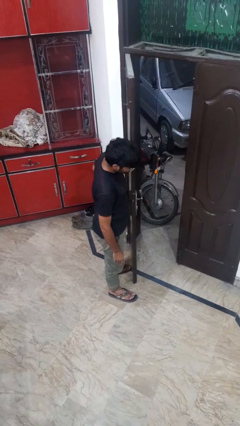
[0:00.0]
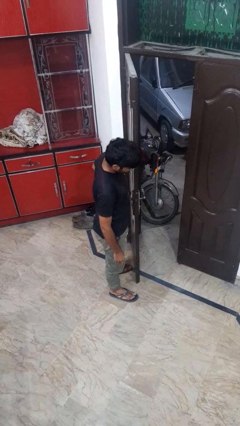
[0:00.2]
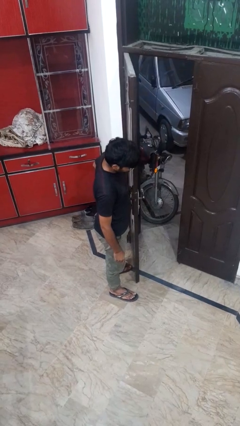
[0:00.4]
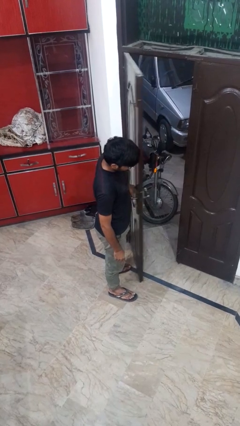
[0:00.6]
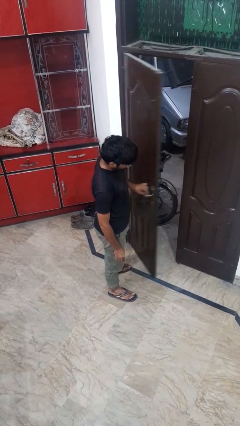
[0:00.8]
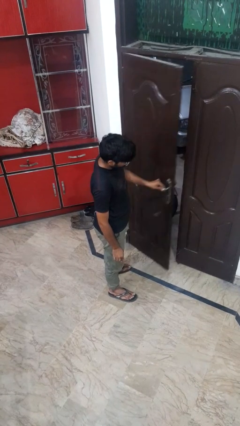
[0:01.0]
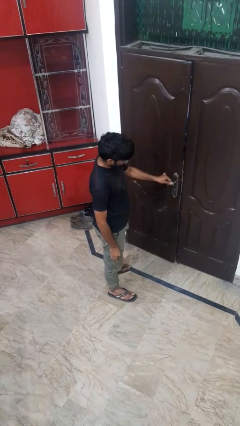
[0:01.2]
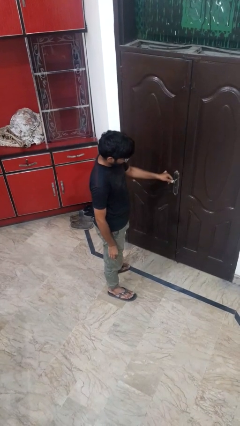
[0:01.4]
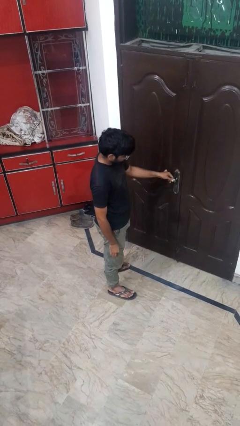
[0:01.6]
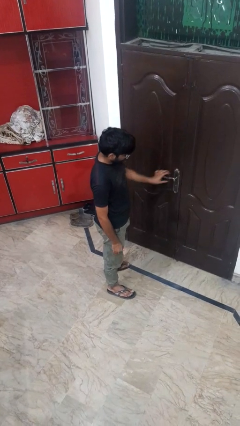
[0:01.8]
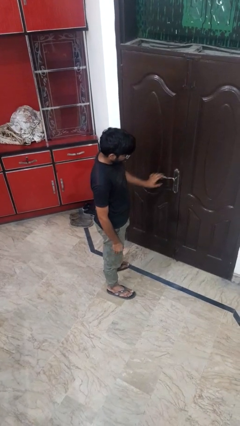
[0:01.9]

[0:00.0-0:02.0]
person closes facility door

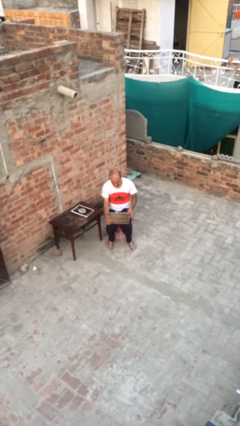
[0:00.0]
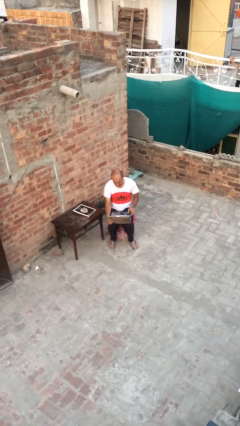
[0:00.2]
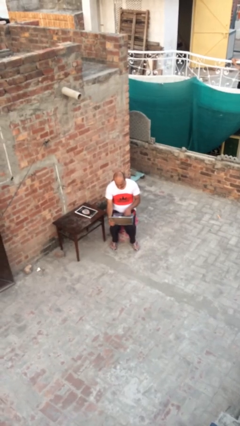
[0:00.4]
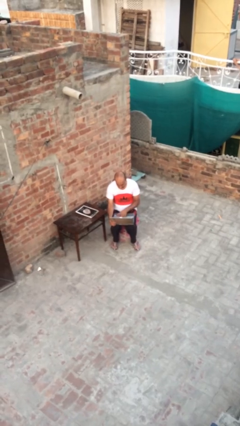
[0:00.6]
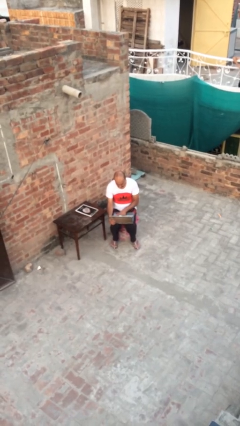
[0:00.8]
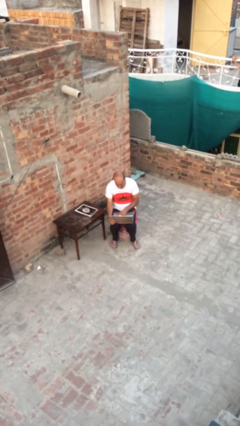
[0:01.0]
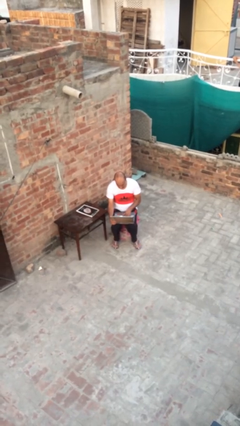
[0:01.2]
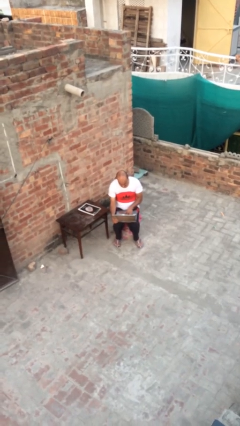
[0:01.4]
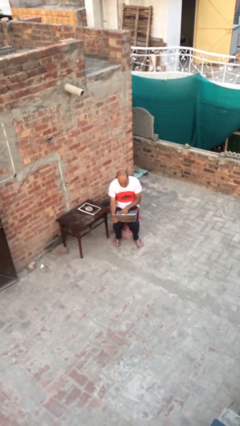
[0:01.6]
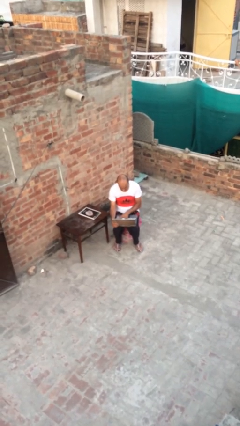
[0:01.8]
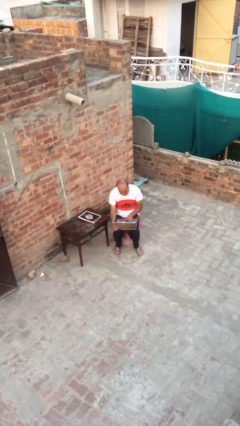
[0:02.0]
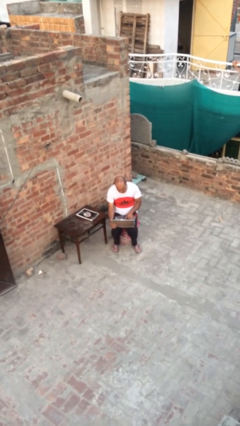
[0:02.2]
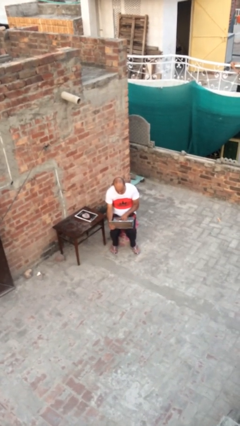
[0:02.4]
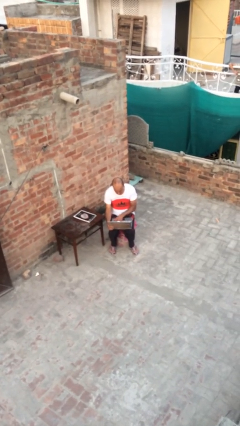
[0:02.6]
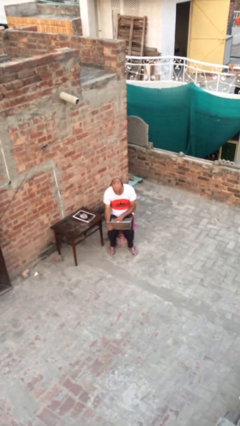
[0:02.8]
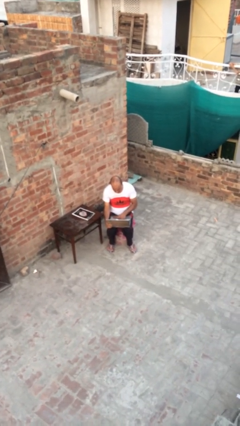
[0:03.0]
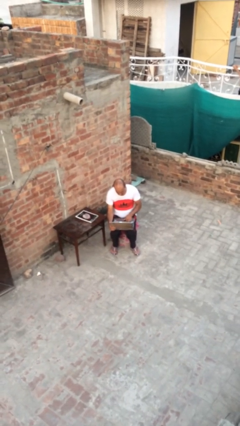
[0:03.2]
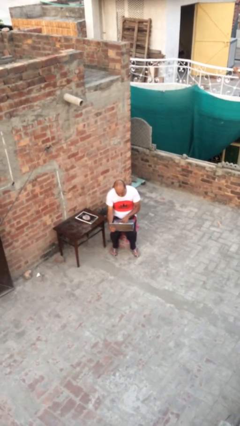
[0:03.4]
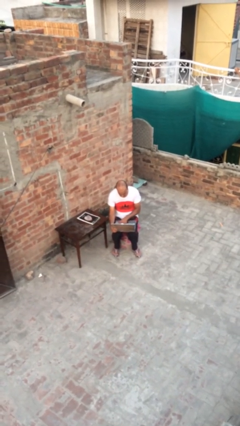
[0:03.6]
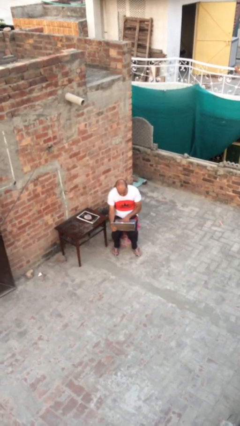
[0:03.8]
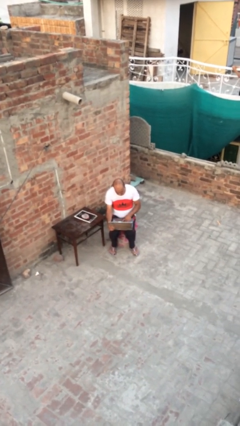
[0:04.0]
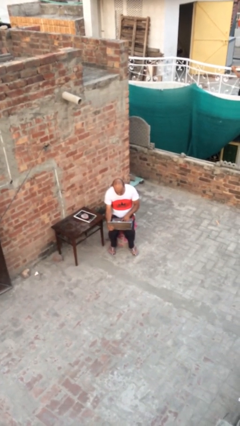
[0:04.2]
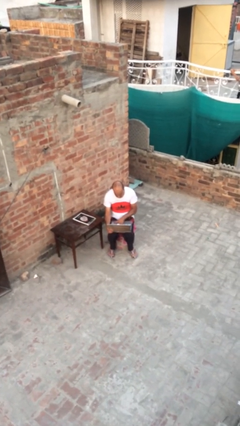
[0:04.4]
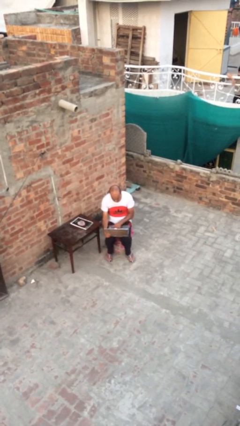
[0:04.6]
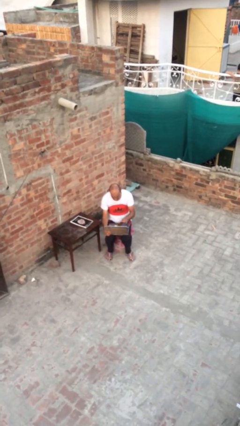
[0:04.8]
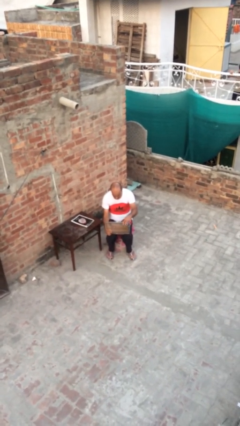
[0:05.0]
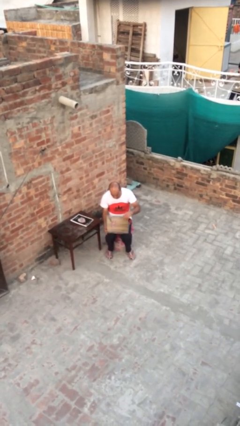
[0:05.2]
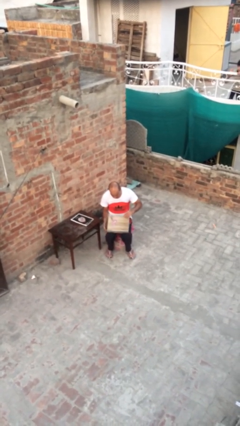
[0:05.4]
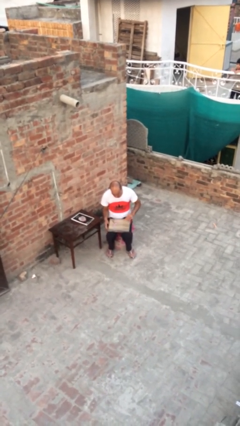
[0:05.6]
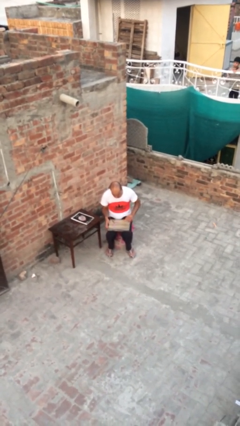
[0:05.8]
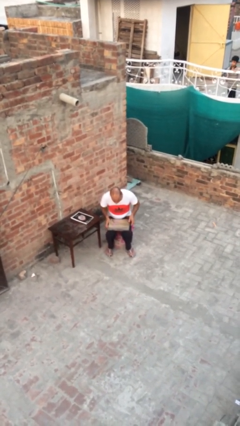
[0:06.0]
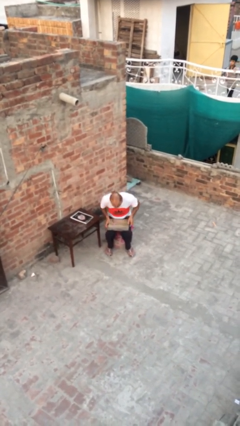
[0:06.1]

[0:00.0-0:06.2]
person interacts with laptop

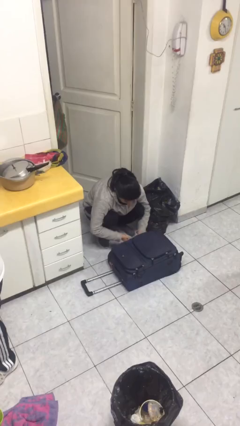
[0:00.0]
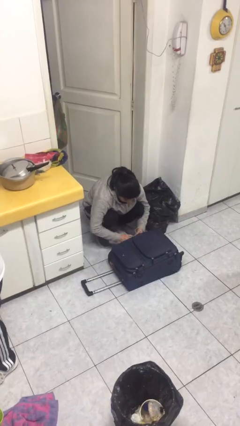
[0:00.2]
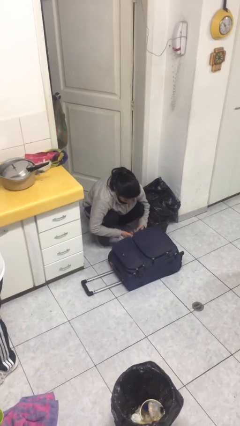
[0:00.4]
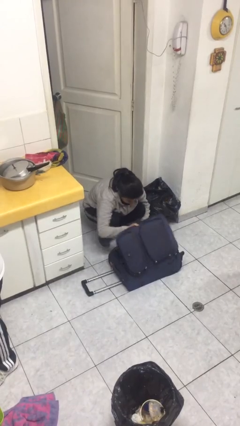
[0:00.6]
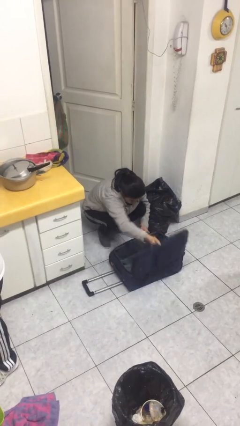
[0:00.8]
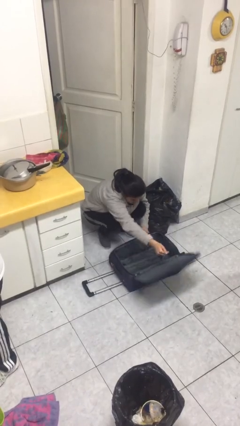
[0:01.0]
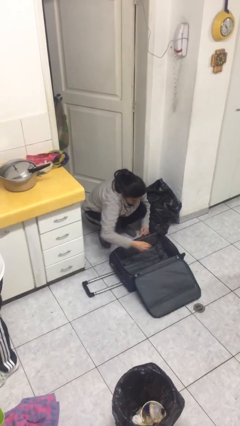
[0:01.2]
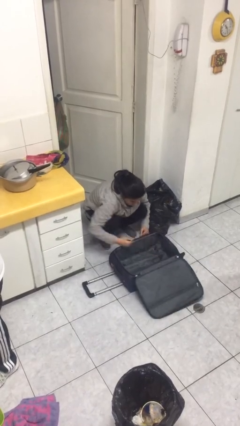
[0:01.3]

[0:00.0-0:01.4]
person opens suitcase

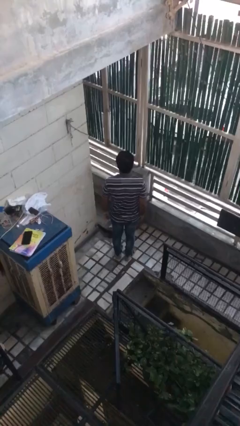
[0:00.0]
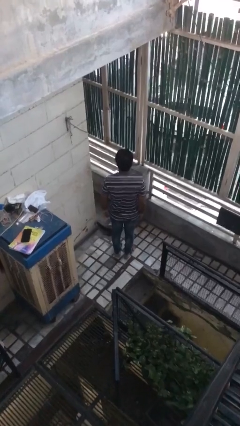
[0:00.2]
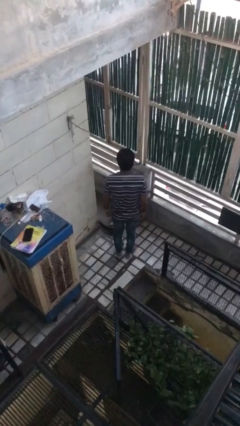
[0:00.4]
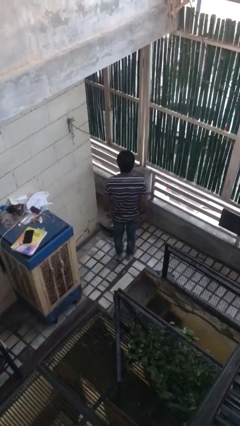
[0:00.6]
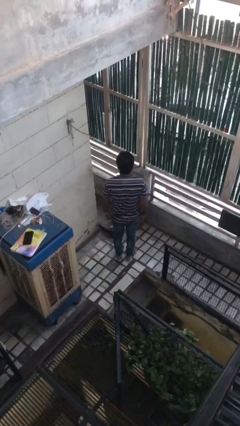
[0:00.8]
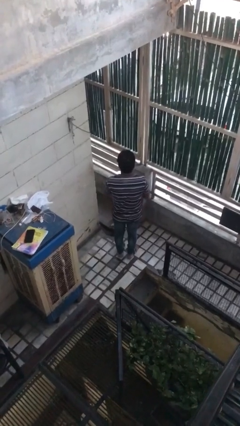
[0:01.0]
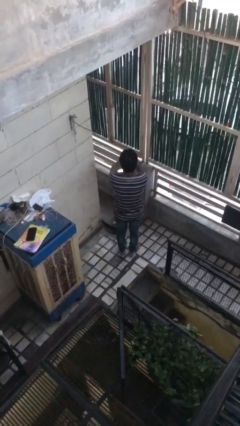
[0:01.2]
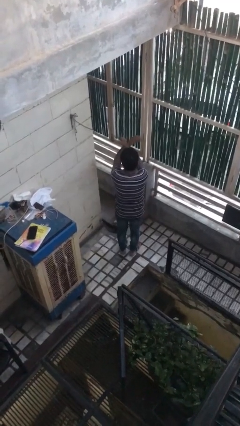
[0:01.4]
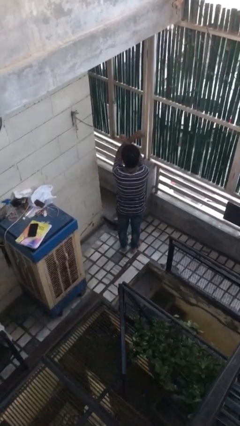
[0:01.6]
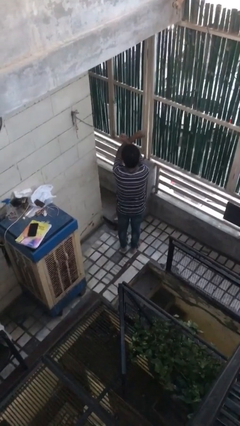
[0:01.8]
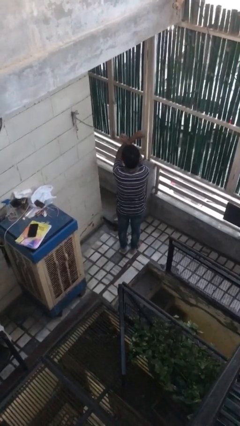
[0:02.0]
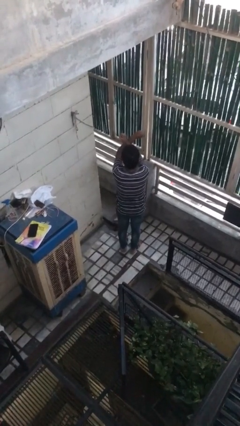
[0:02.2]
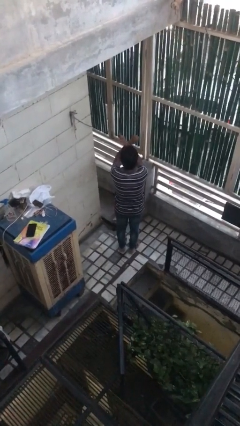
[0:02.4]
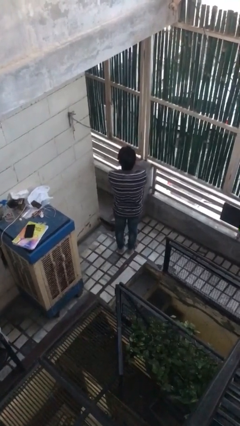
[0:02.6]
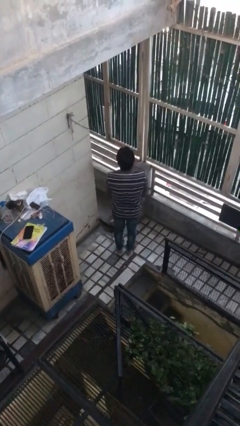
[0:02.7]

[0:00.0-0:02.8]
person gestures arms x

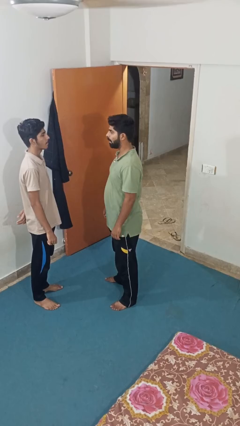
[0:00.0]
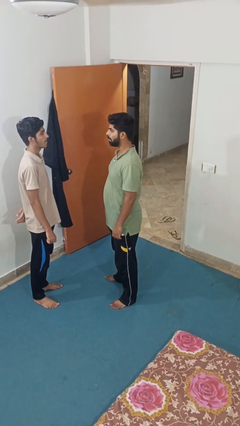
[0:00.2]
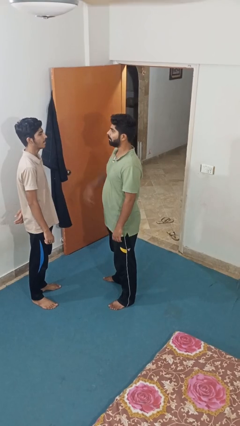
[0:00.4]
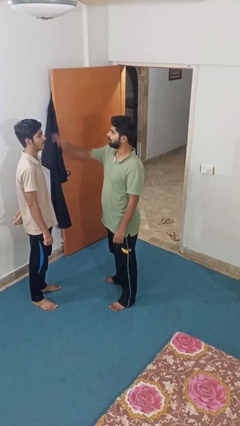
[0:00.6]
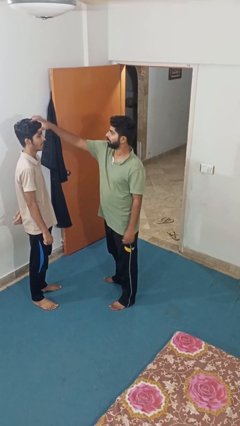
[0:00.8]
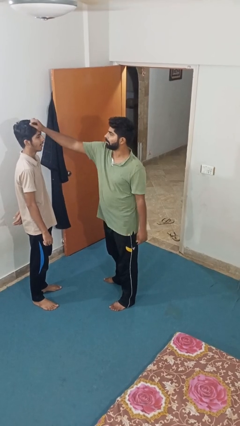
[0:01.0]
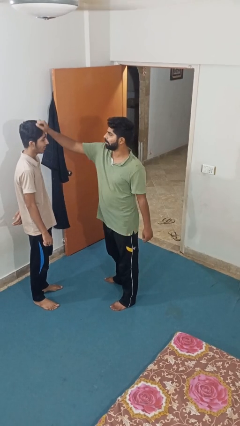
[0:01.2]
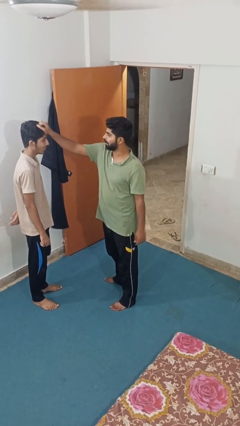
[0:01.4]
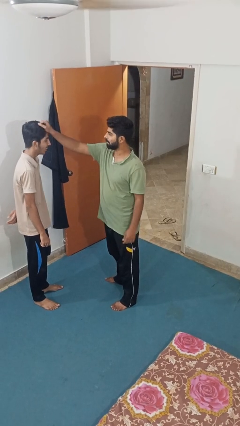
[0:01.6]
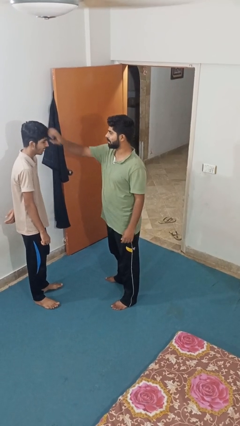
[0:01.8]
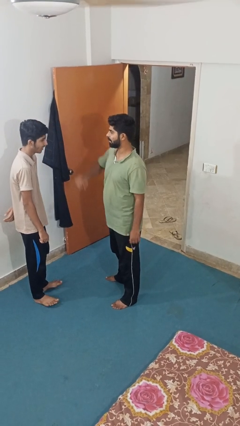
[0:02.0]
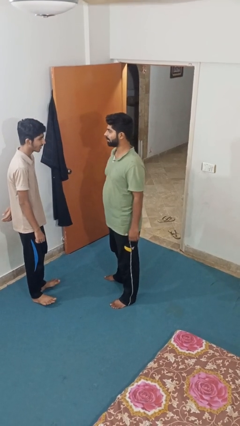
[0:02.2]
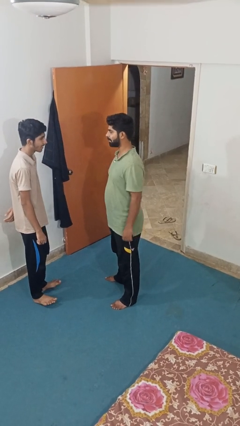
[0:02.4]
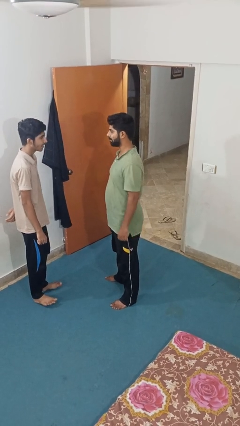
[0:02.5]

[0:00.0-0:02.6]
person grabs person by hair

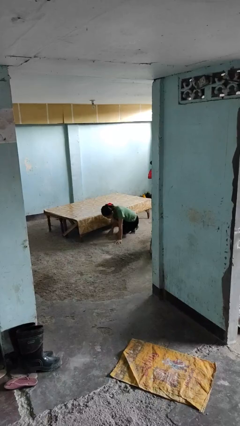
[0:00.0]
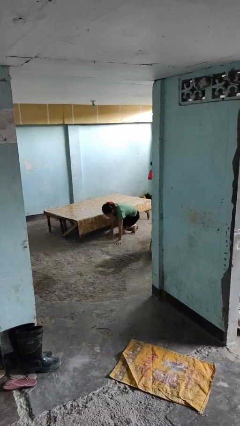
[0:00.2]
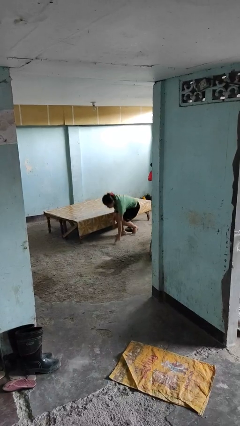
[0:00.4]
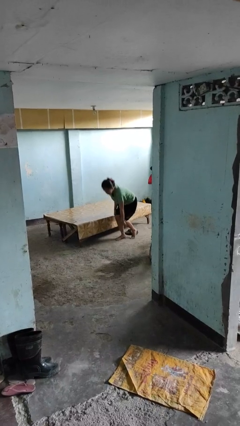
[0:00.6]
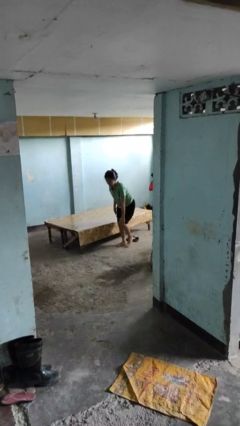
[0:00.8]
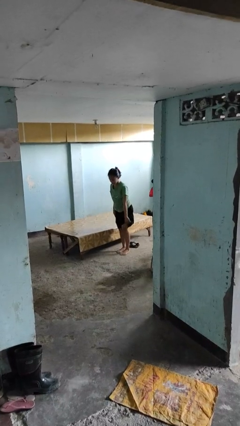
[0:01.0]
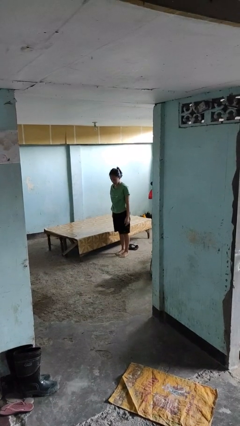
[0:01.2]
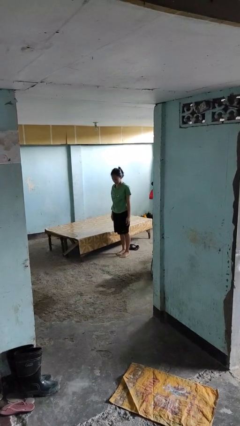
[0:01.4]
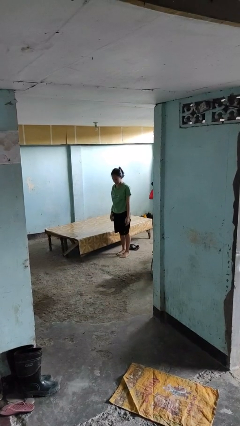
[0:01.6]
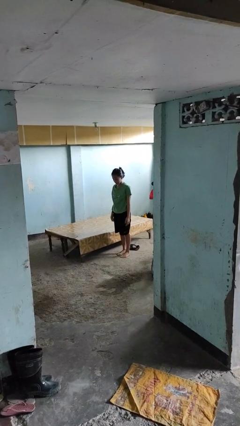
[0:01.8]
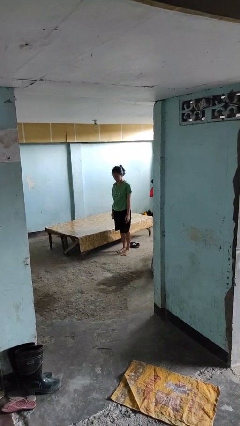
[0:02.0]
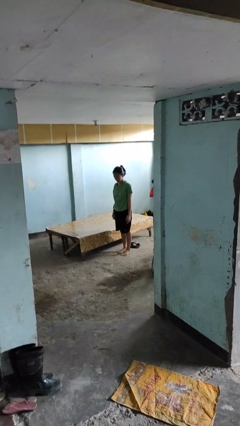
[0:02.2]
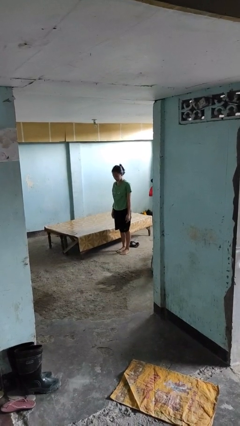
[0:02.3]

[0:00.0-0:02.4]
person stands up from floor
